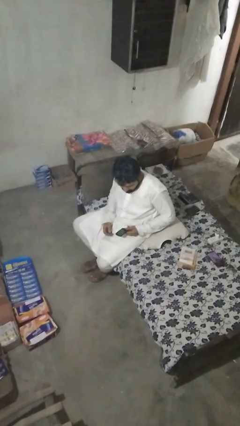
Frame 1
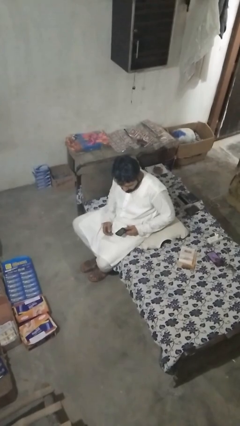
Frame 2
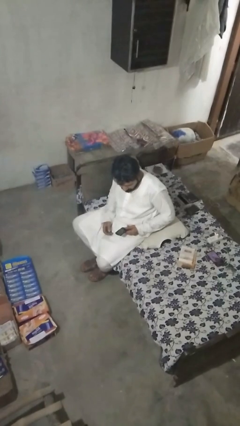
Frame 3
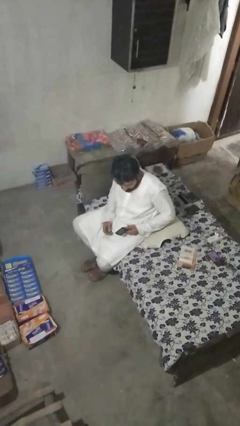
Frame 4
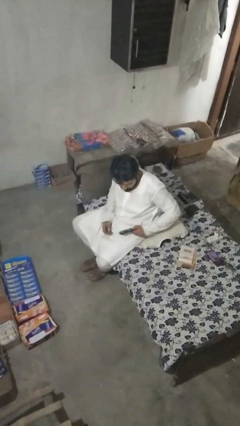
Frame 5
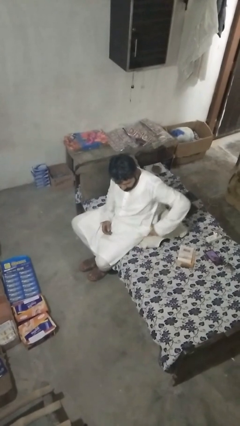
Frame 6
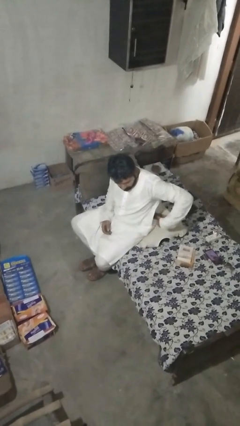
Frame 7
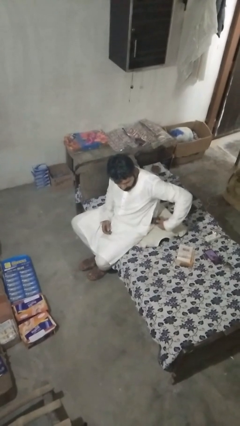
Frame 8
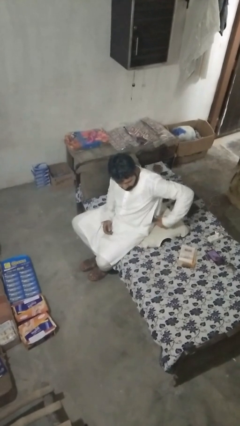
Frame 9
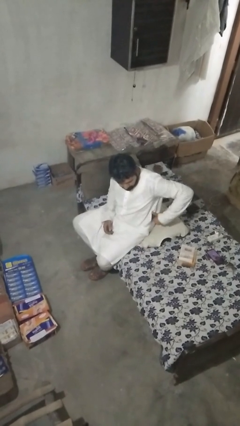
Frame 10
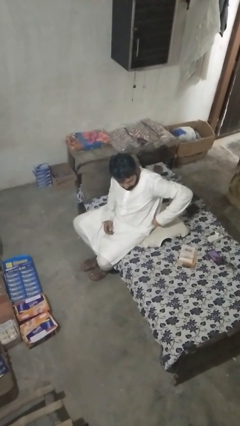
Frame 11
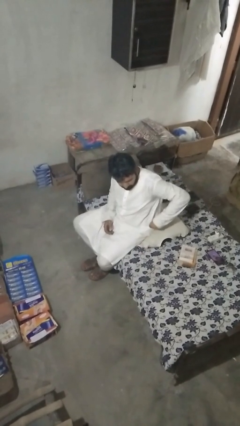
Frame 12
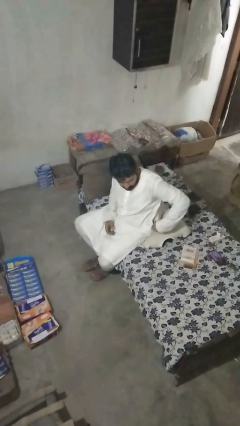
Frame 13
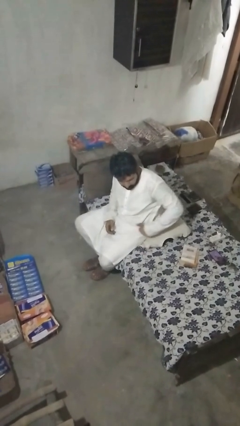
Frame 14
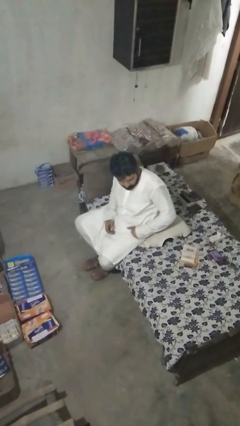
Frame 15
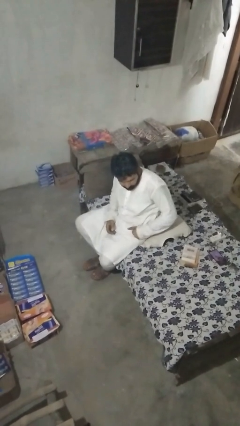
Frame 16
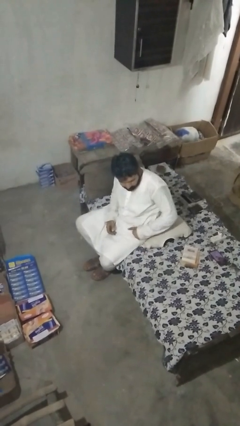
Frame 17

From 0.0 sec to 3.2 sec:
person puts phone into pocket

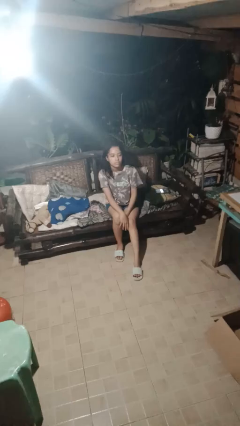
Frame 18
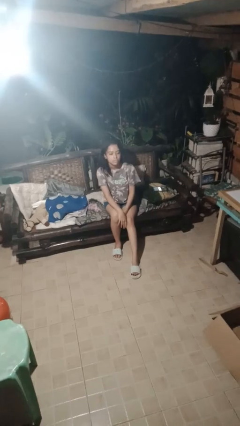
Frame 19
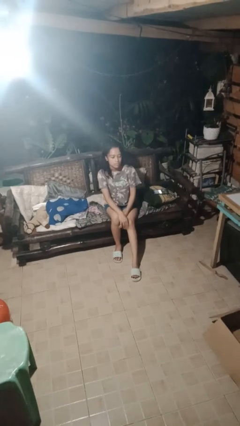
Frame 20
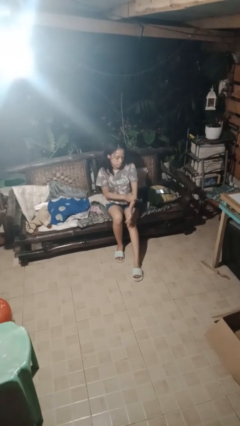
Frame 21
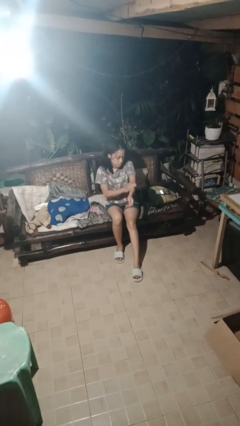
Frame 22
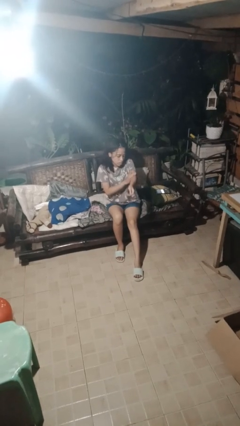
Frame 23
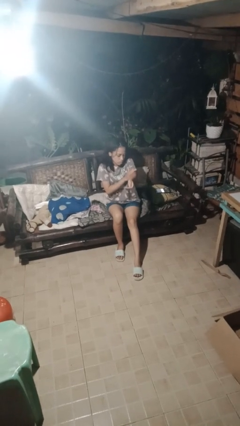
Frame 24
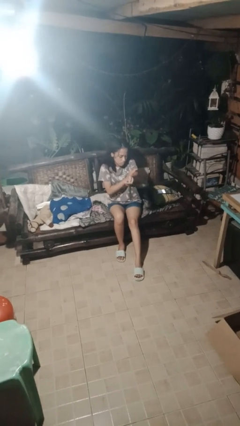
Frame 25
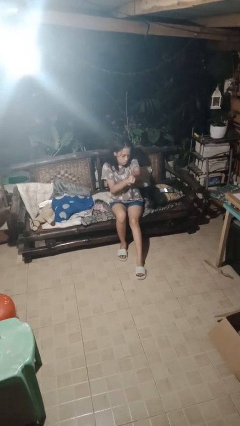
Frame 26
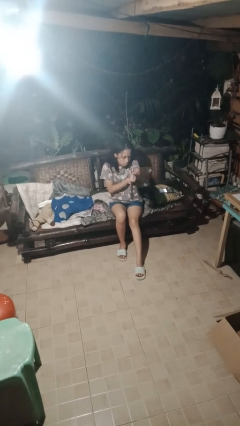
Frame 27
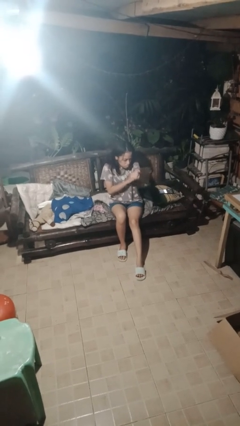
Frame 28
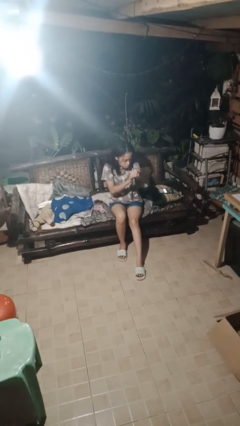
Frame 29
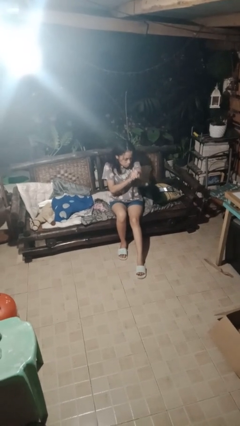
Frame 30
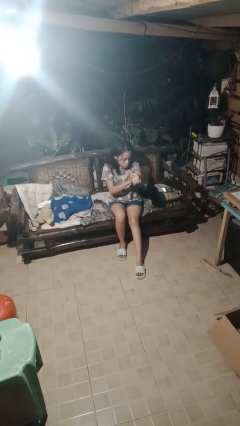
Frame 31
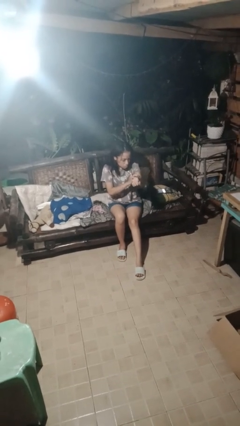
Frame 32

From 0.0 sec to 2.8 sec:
person swats bug

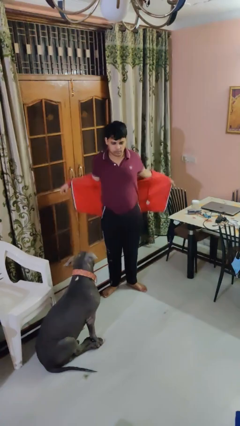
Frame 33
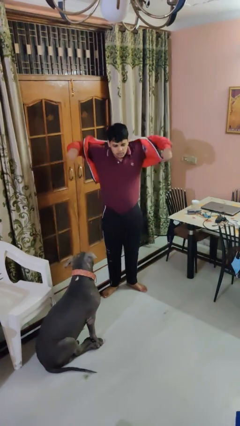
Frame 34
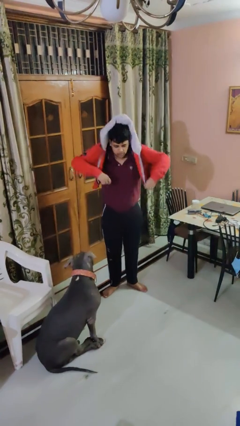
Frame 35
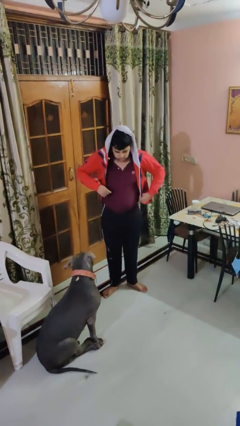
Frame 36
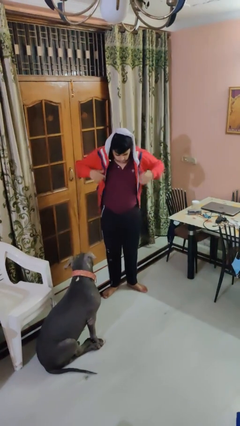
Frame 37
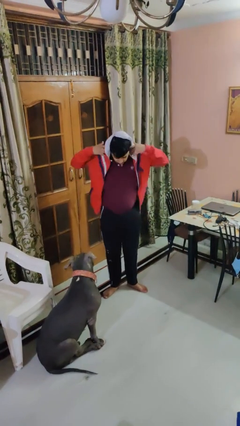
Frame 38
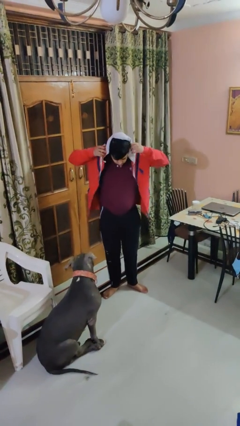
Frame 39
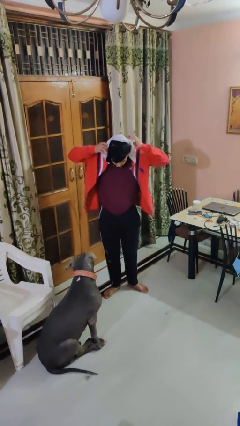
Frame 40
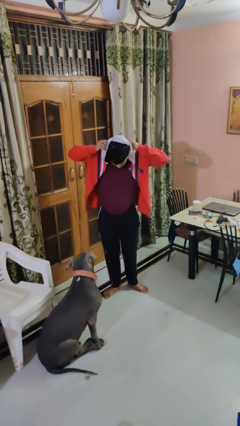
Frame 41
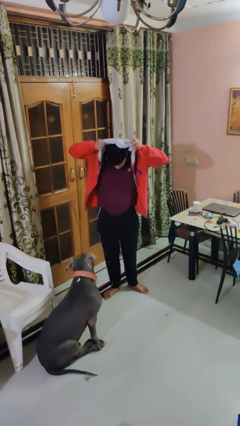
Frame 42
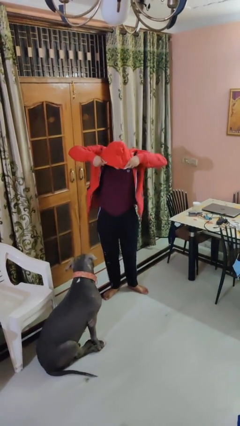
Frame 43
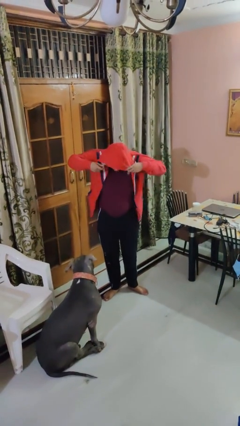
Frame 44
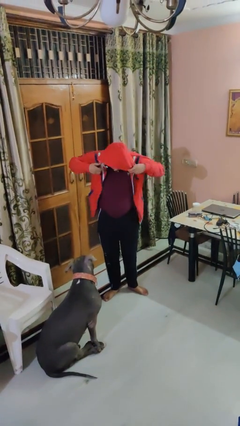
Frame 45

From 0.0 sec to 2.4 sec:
person puts on hoodie

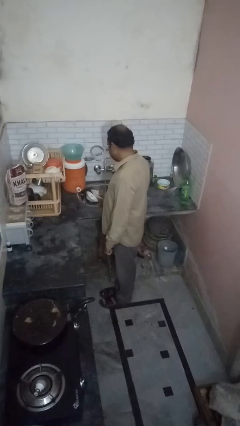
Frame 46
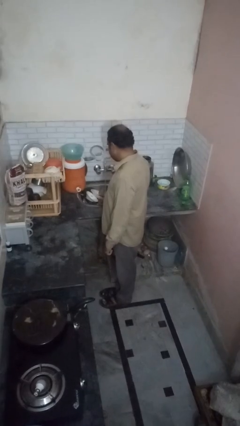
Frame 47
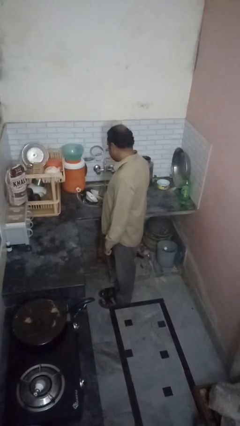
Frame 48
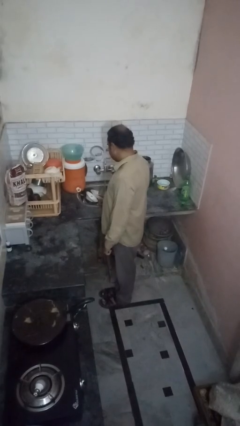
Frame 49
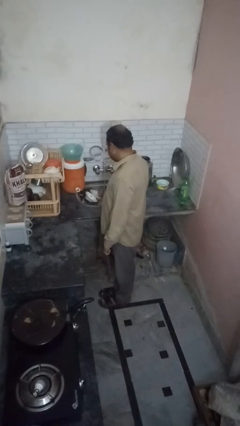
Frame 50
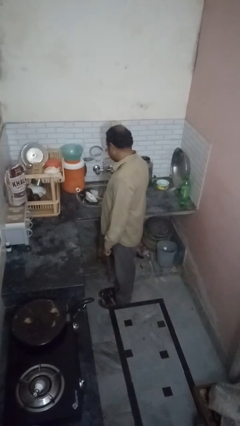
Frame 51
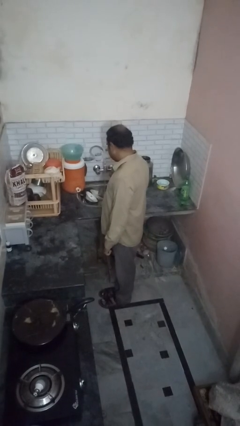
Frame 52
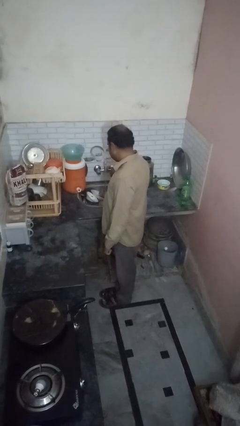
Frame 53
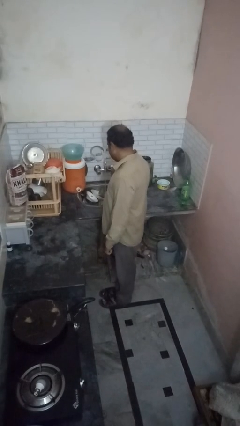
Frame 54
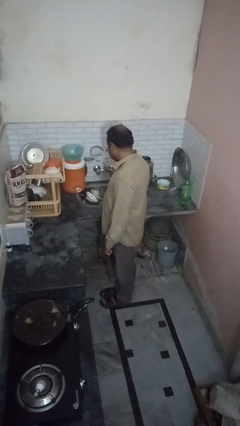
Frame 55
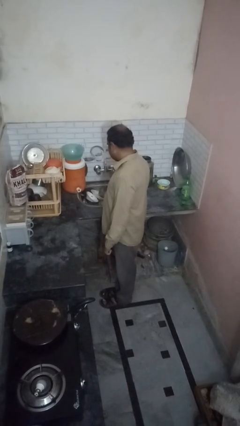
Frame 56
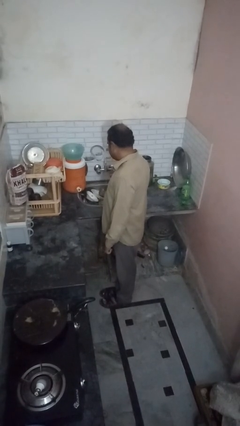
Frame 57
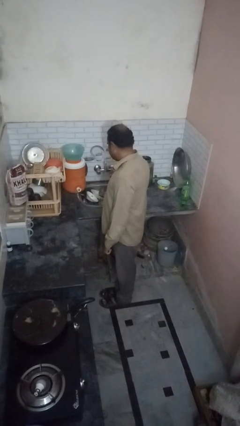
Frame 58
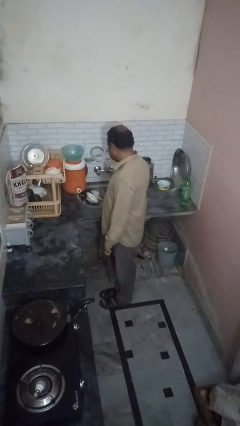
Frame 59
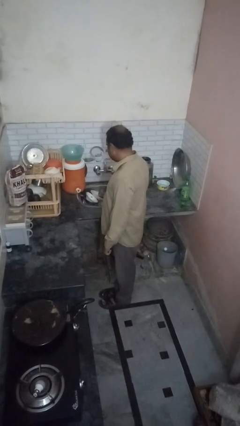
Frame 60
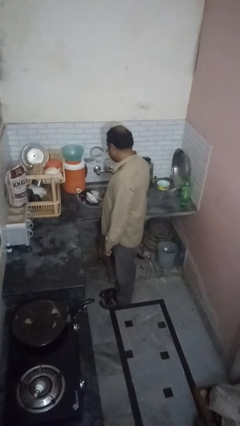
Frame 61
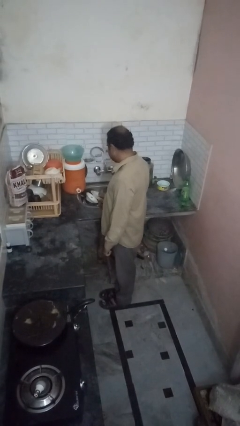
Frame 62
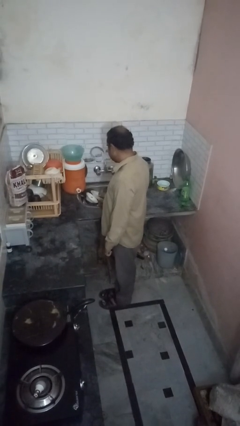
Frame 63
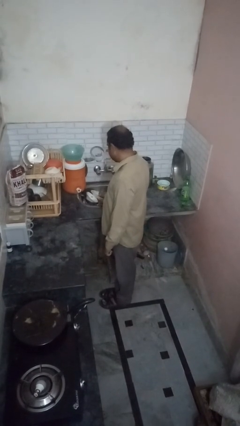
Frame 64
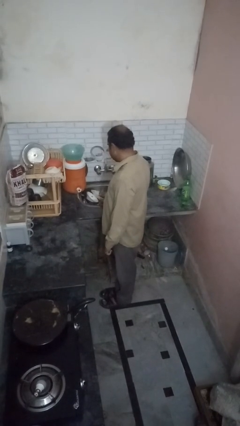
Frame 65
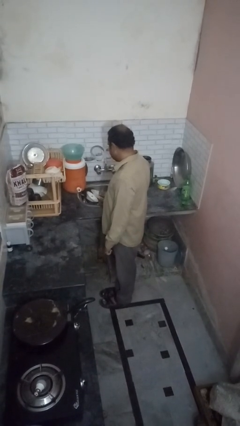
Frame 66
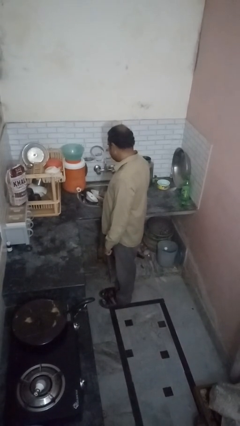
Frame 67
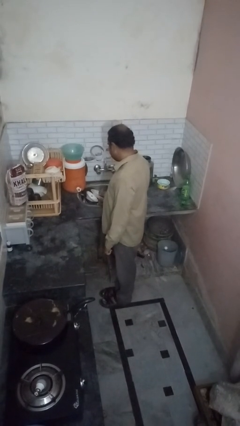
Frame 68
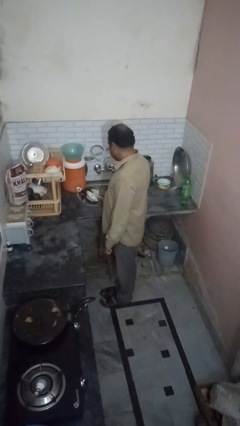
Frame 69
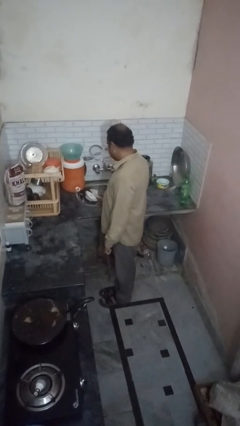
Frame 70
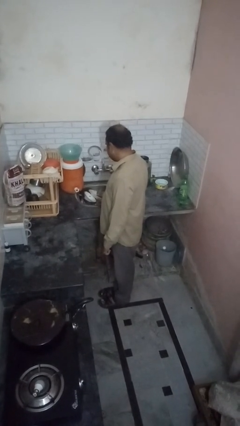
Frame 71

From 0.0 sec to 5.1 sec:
person closes dishwasher

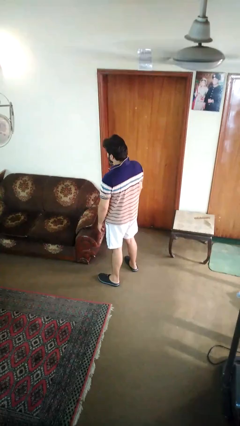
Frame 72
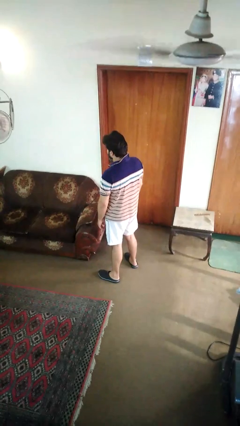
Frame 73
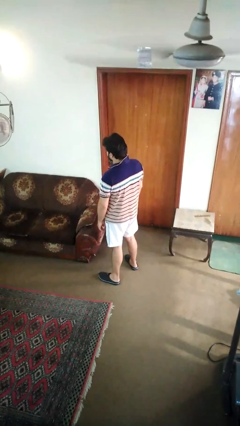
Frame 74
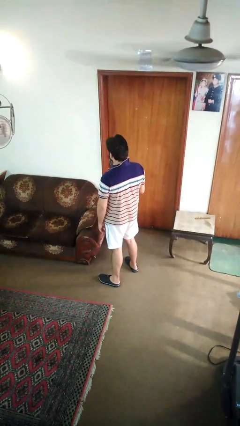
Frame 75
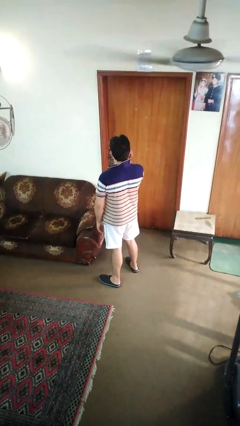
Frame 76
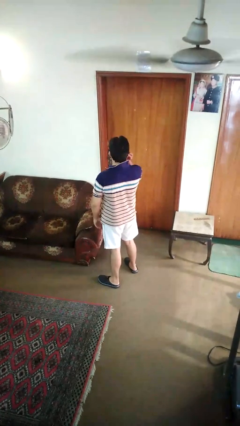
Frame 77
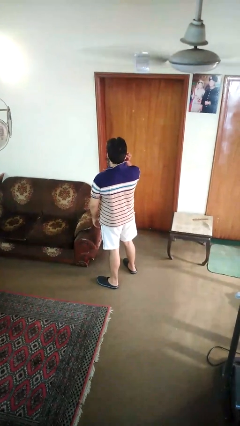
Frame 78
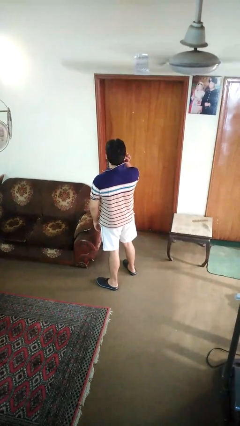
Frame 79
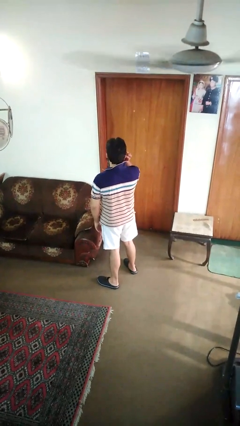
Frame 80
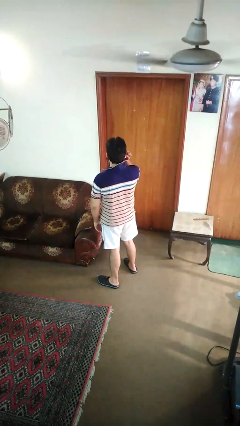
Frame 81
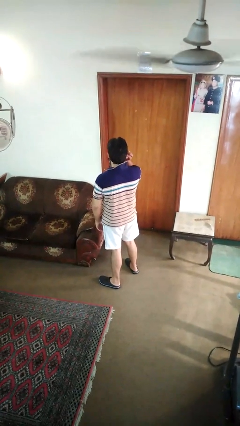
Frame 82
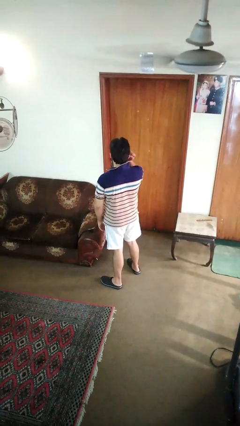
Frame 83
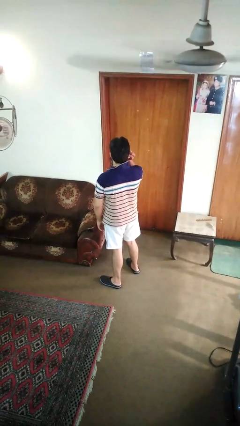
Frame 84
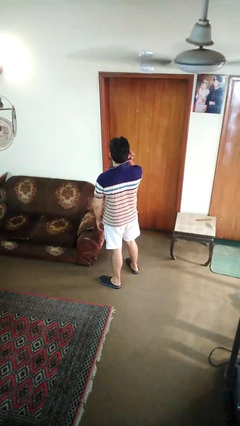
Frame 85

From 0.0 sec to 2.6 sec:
person touches earlobe

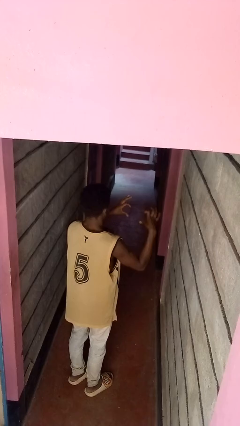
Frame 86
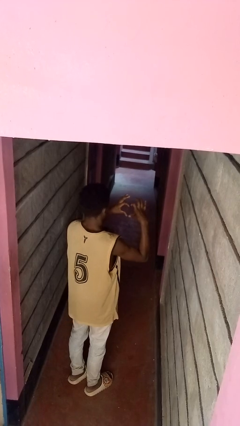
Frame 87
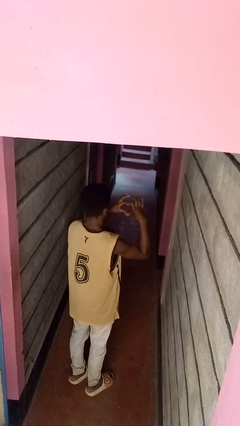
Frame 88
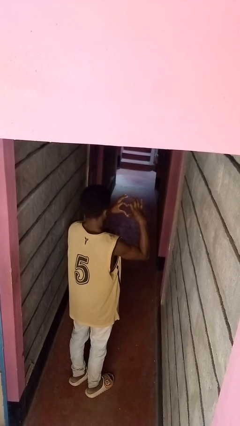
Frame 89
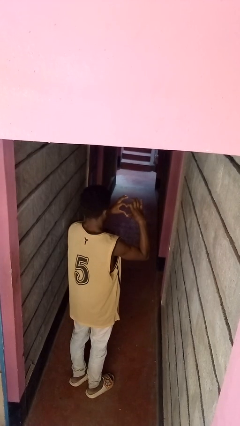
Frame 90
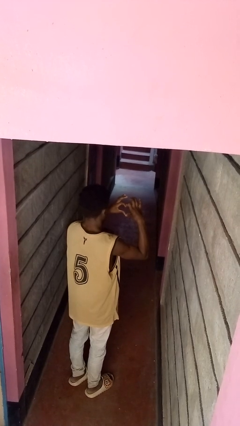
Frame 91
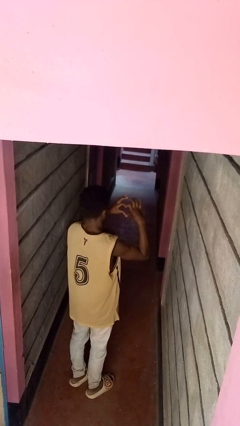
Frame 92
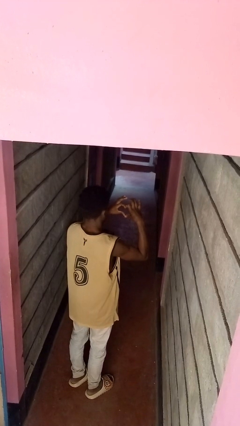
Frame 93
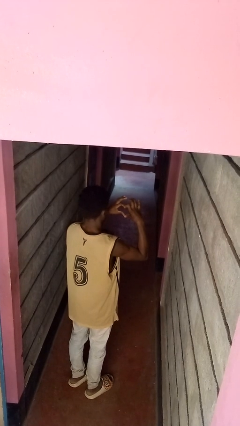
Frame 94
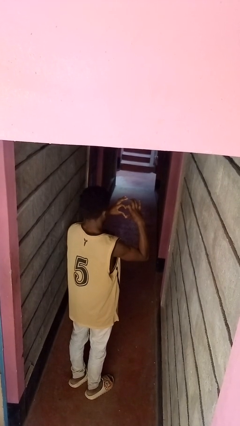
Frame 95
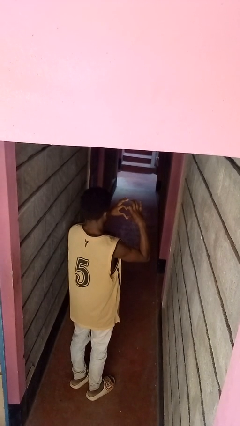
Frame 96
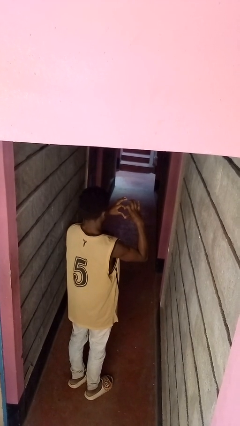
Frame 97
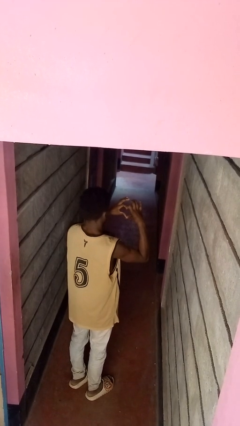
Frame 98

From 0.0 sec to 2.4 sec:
person gestures heart
